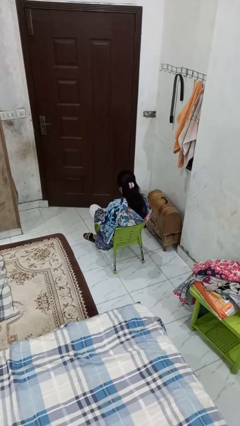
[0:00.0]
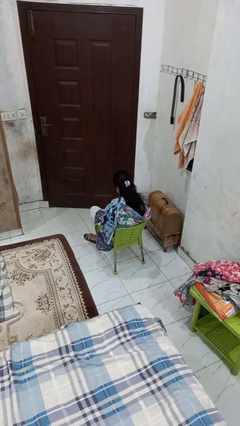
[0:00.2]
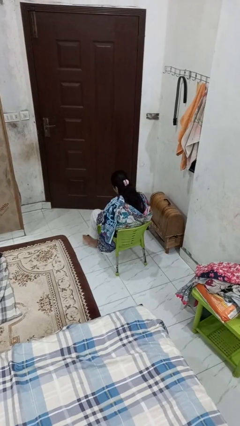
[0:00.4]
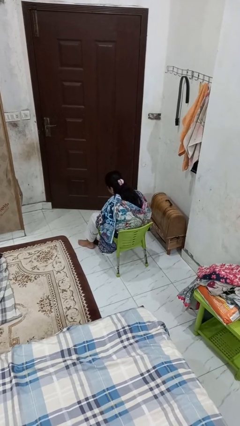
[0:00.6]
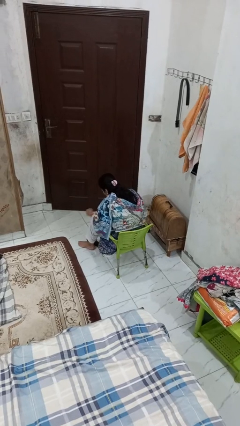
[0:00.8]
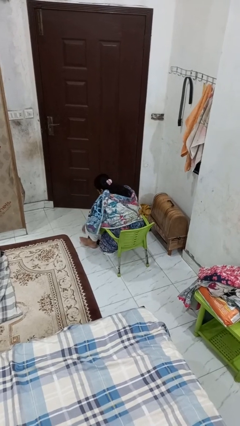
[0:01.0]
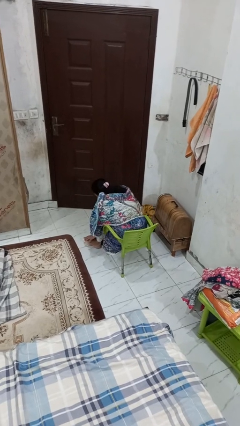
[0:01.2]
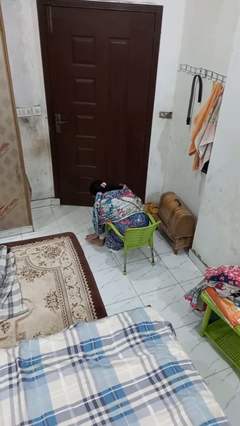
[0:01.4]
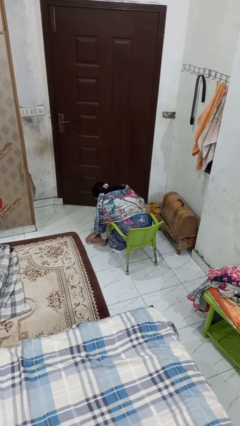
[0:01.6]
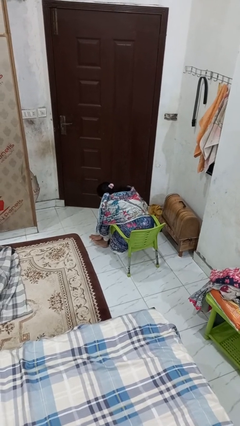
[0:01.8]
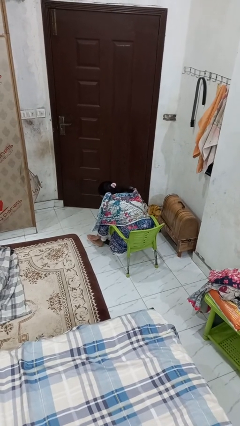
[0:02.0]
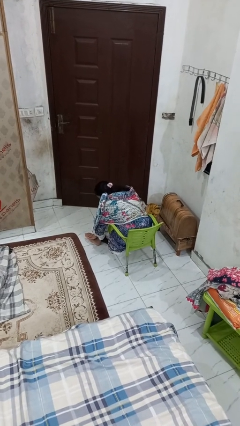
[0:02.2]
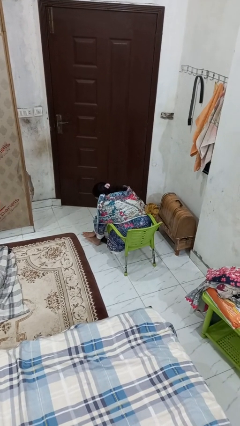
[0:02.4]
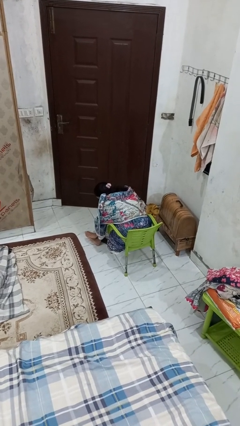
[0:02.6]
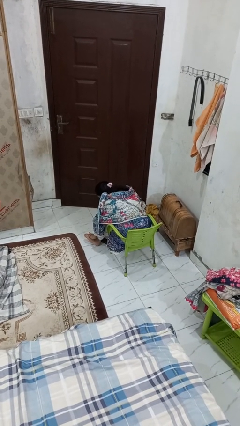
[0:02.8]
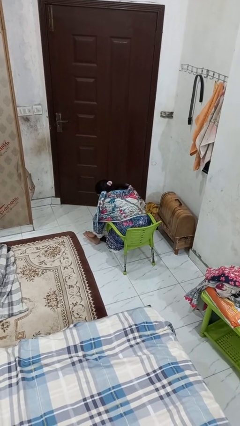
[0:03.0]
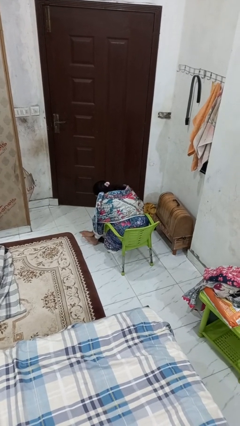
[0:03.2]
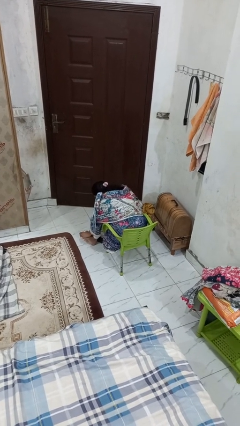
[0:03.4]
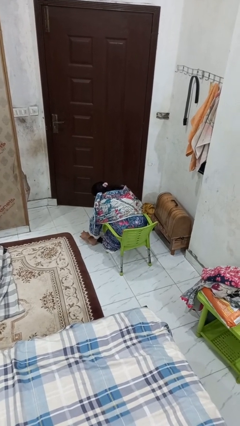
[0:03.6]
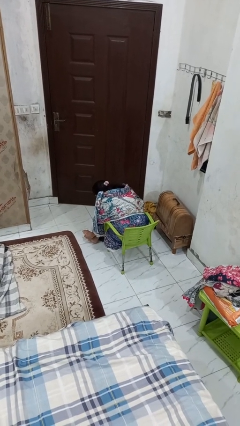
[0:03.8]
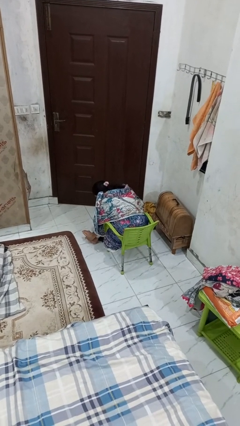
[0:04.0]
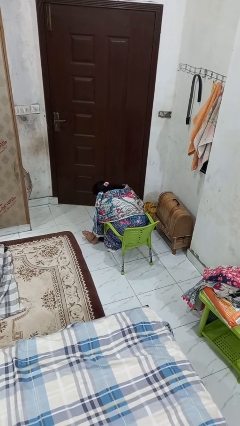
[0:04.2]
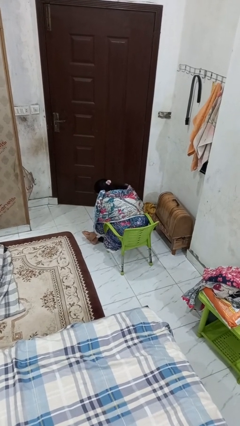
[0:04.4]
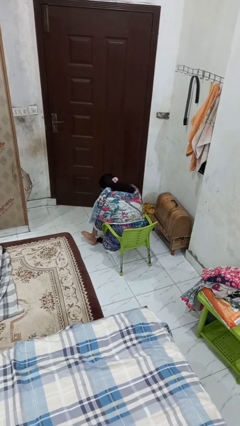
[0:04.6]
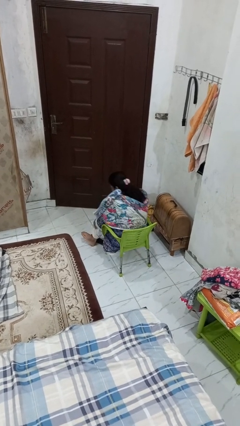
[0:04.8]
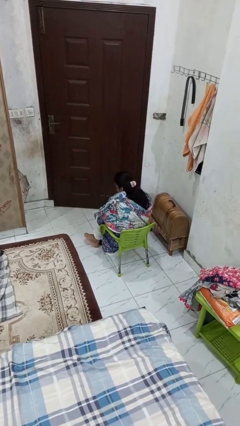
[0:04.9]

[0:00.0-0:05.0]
person rubs foot

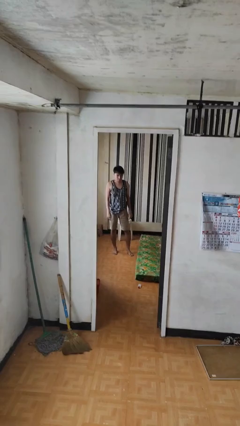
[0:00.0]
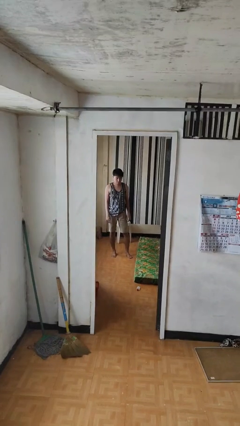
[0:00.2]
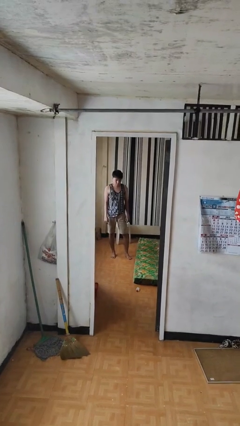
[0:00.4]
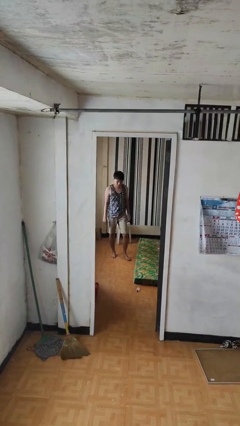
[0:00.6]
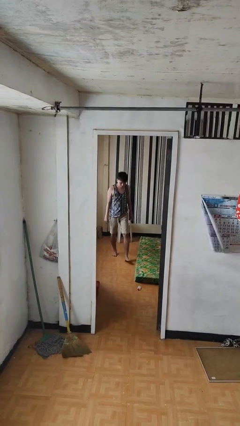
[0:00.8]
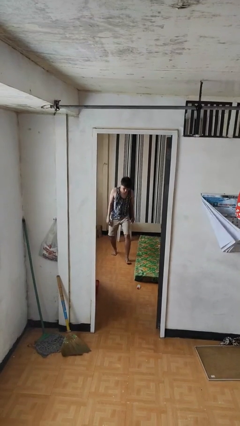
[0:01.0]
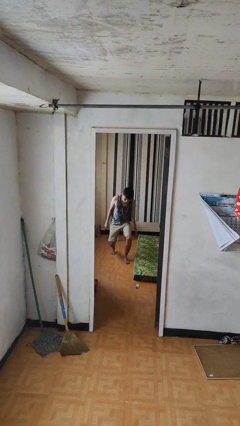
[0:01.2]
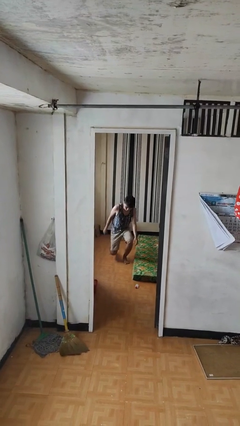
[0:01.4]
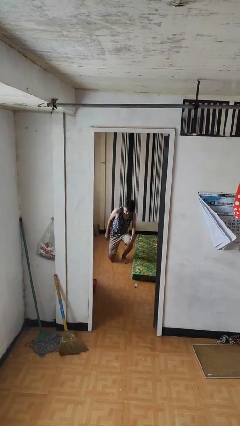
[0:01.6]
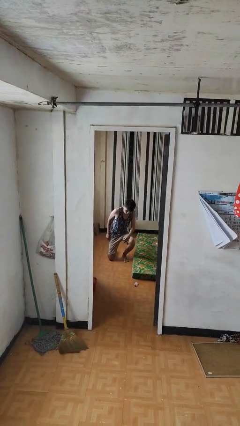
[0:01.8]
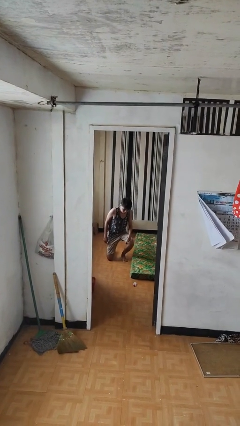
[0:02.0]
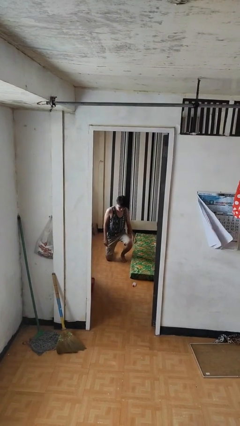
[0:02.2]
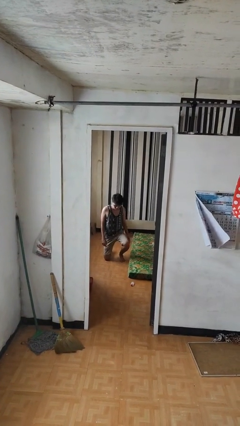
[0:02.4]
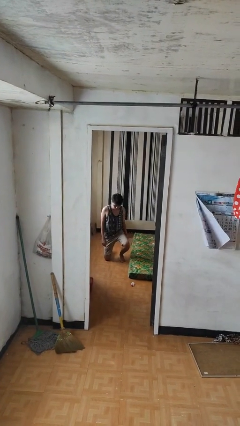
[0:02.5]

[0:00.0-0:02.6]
person kneels

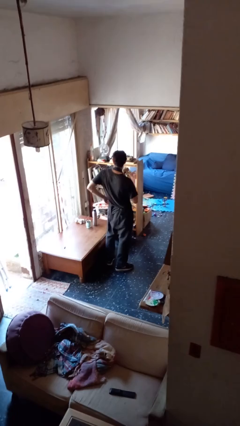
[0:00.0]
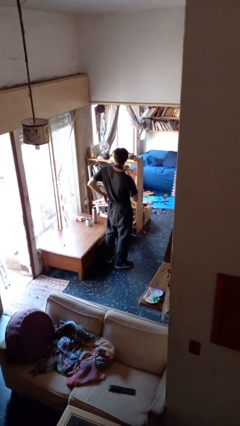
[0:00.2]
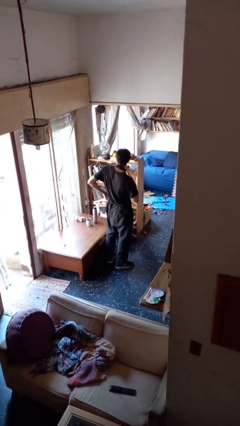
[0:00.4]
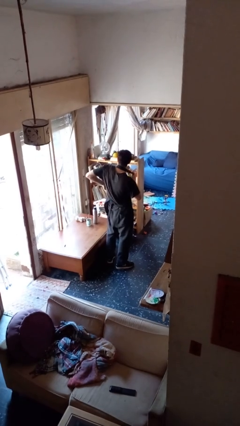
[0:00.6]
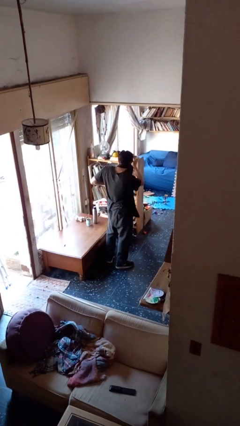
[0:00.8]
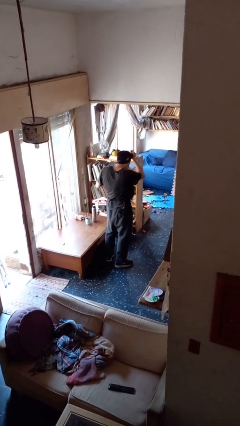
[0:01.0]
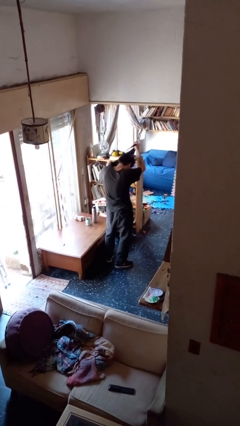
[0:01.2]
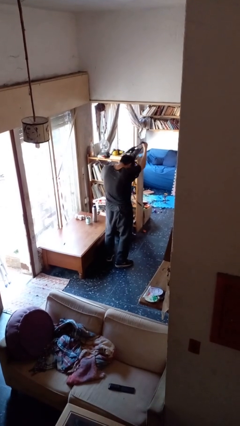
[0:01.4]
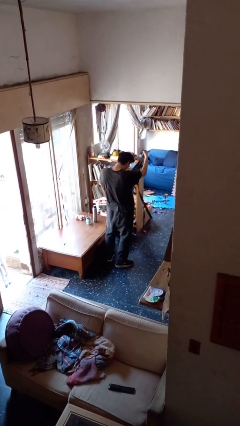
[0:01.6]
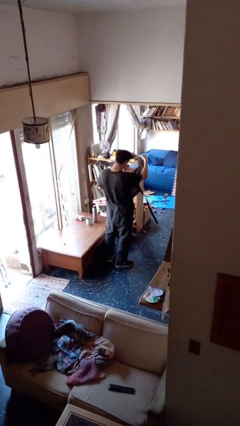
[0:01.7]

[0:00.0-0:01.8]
person takes off apron

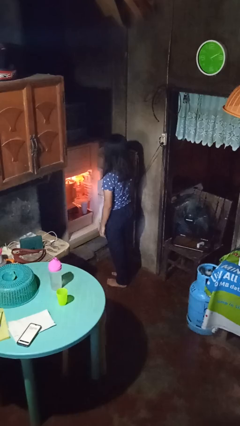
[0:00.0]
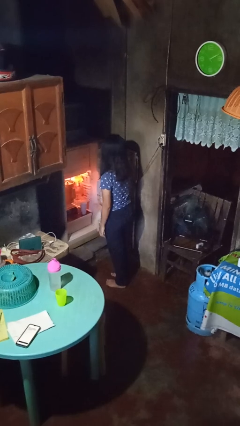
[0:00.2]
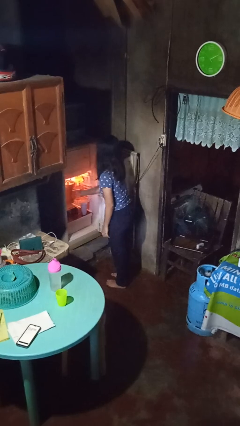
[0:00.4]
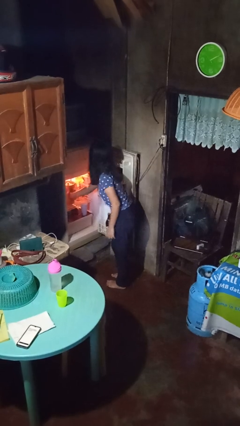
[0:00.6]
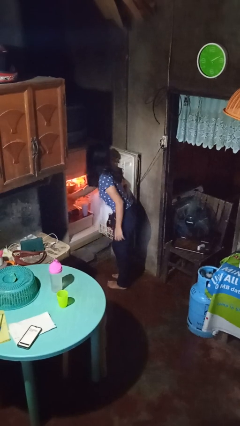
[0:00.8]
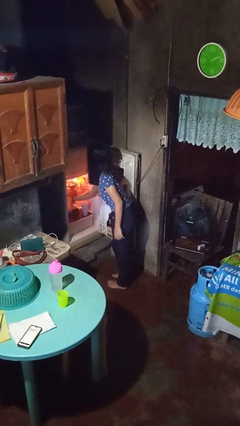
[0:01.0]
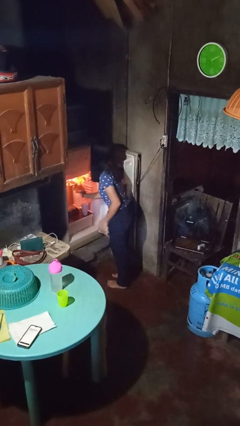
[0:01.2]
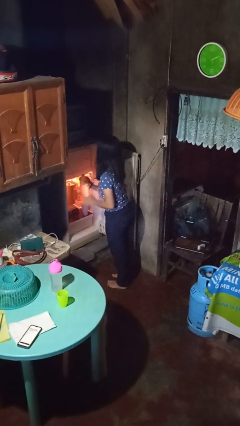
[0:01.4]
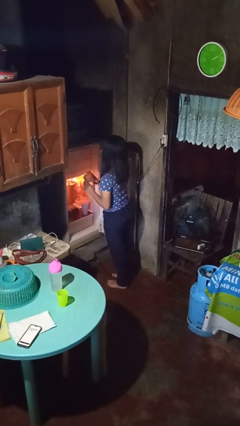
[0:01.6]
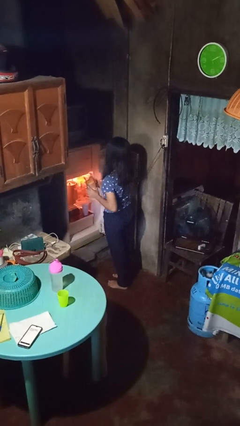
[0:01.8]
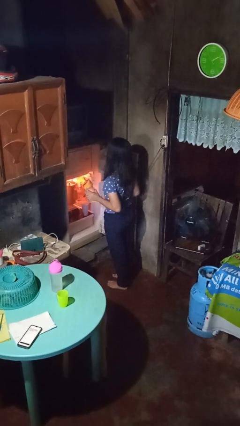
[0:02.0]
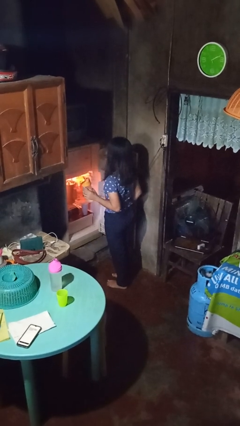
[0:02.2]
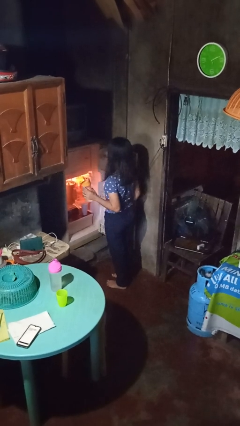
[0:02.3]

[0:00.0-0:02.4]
person takes object from refrigerator

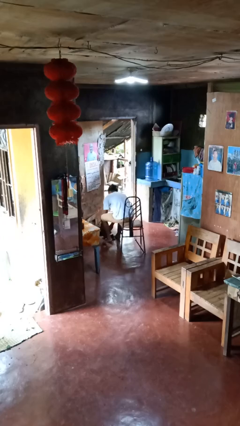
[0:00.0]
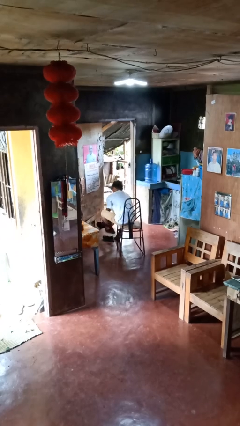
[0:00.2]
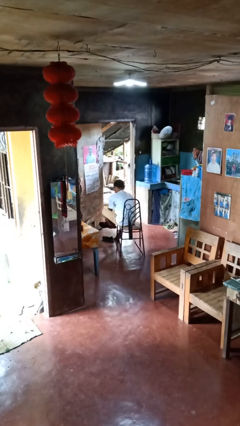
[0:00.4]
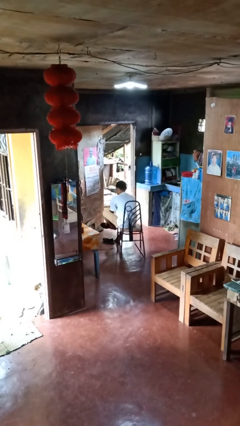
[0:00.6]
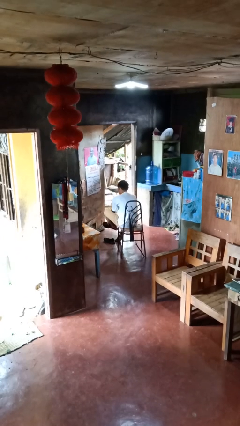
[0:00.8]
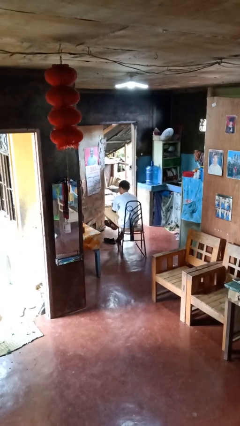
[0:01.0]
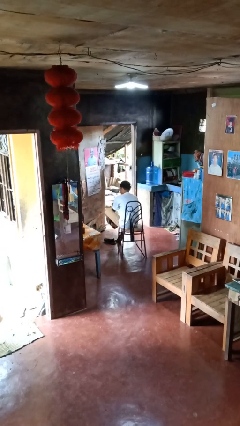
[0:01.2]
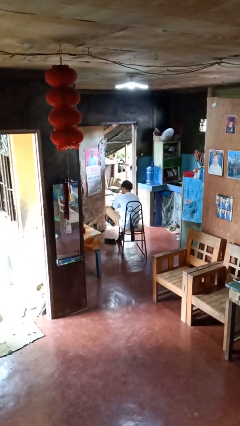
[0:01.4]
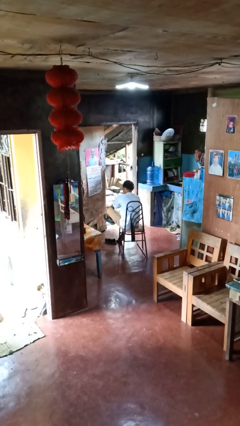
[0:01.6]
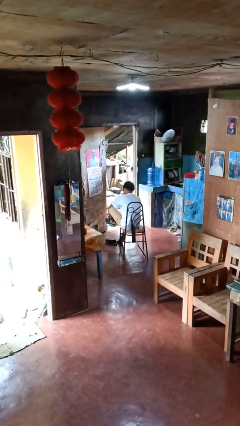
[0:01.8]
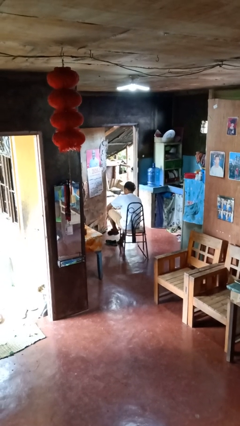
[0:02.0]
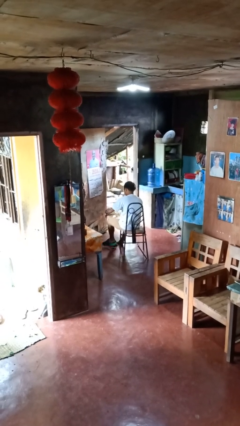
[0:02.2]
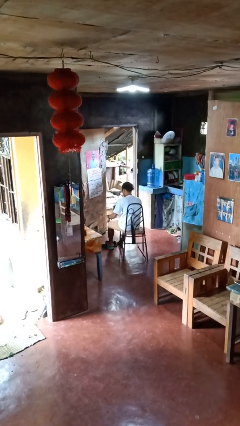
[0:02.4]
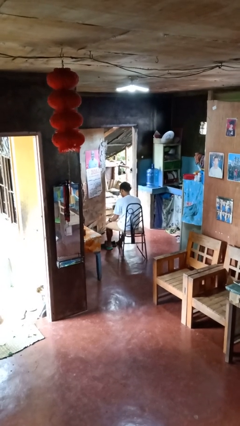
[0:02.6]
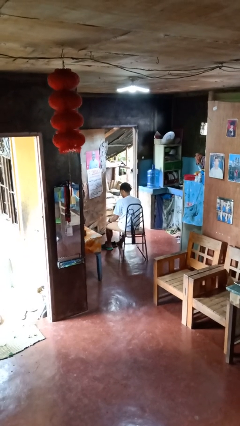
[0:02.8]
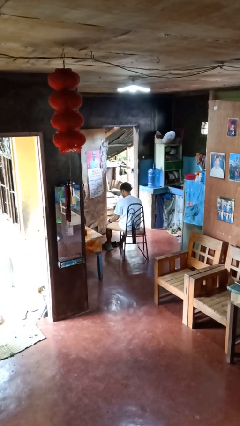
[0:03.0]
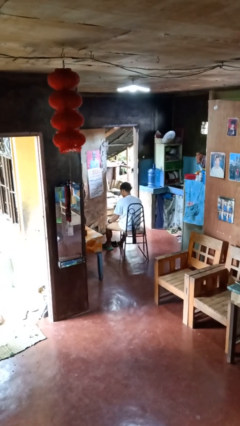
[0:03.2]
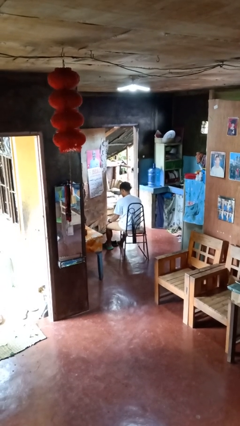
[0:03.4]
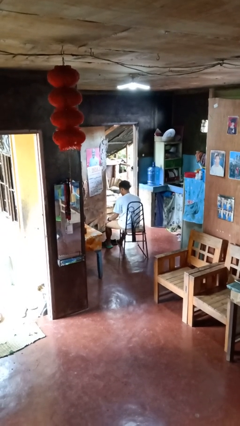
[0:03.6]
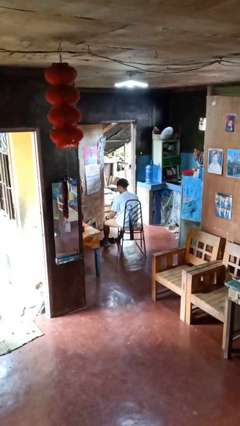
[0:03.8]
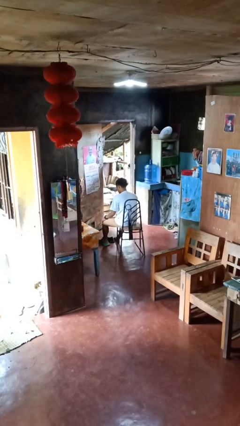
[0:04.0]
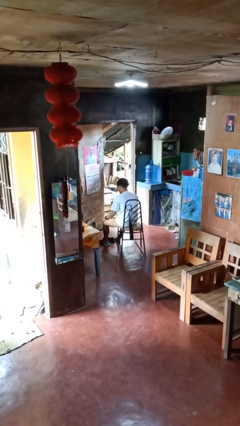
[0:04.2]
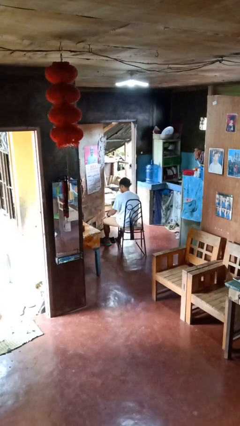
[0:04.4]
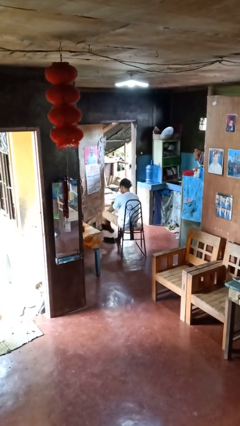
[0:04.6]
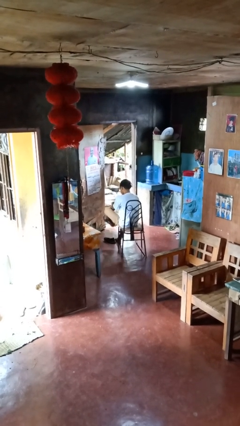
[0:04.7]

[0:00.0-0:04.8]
person puts on shoes

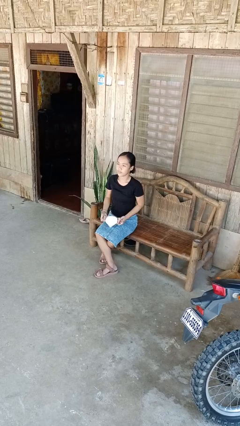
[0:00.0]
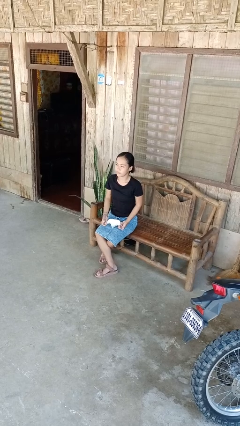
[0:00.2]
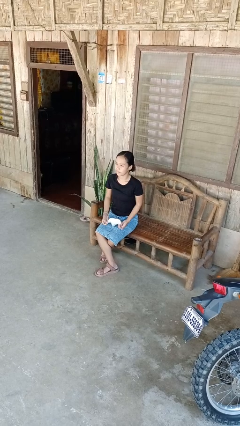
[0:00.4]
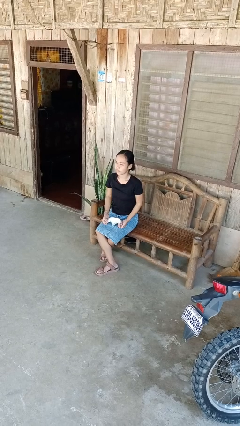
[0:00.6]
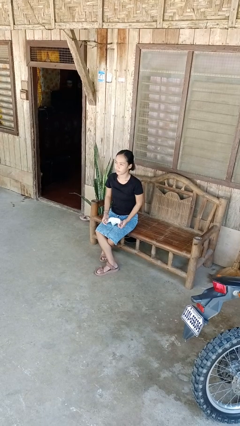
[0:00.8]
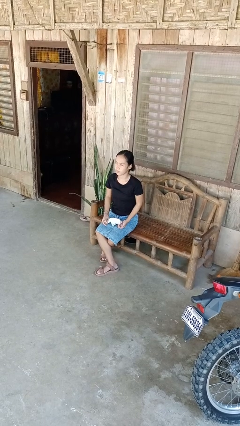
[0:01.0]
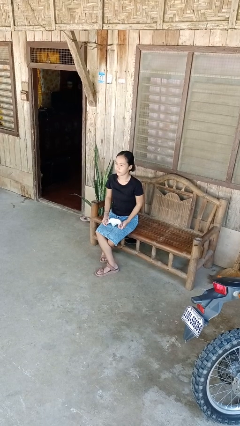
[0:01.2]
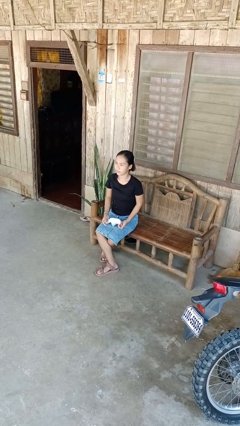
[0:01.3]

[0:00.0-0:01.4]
person takes off facemask
